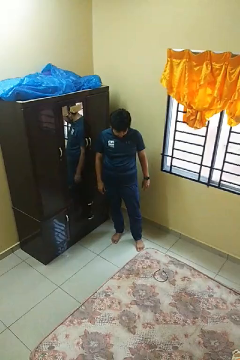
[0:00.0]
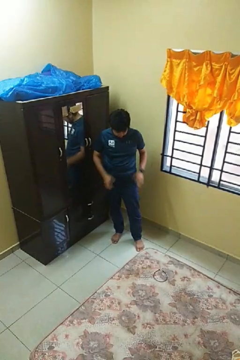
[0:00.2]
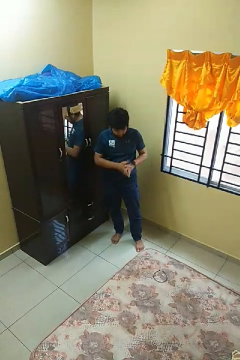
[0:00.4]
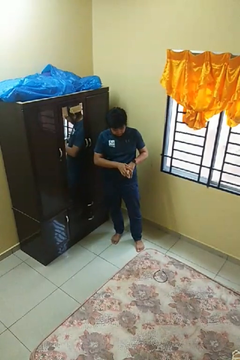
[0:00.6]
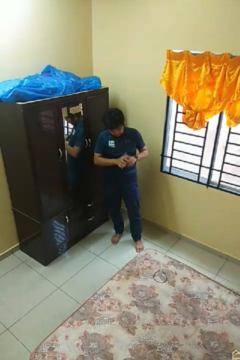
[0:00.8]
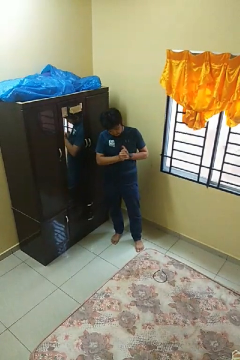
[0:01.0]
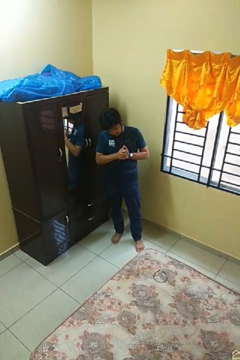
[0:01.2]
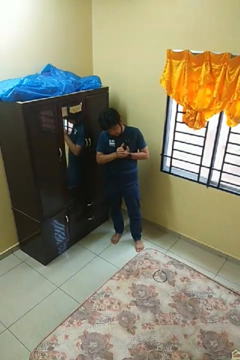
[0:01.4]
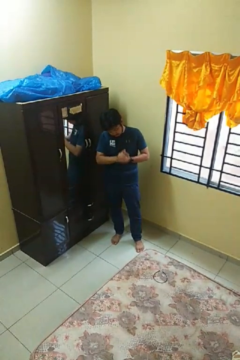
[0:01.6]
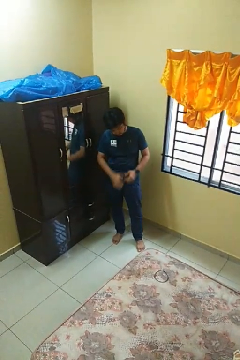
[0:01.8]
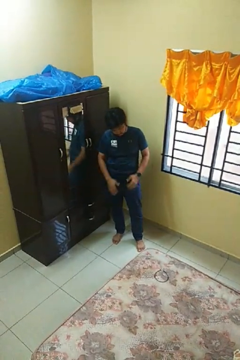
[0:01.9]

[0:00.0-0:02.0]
person cracks knuckles

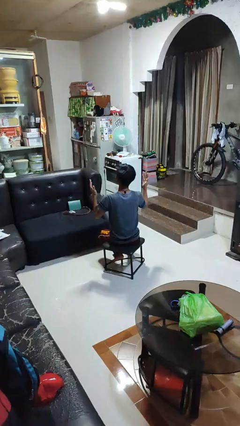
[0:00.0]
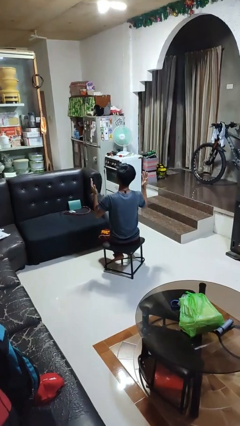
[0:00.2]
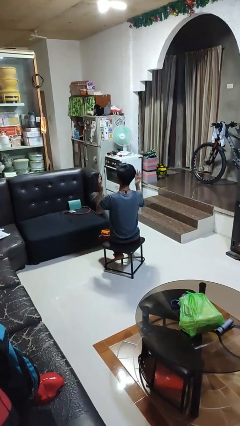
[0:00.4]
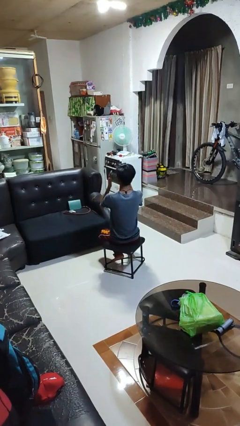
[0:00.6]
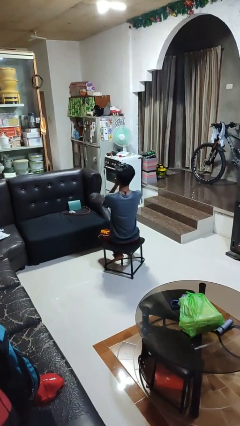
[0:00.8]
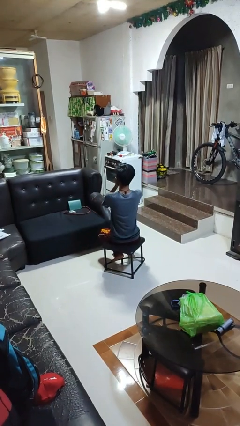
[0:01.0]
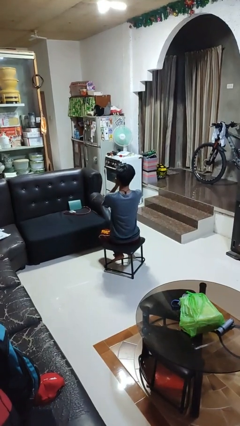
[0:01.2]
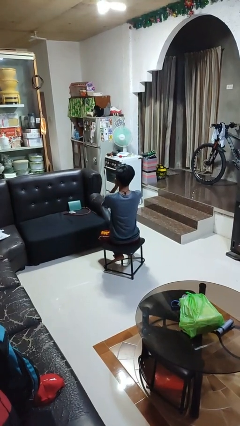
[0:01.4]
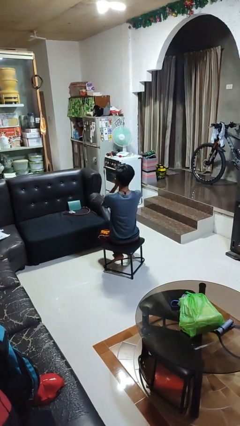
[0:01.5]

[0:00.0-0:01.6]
person covers face with hands

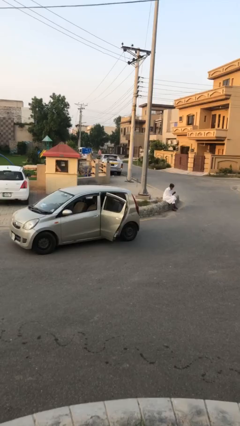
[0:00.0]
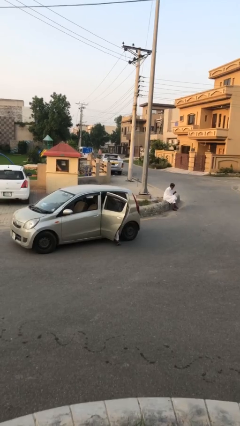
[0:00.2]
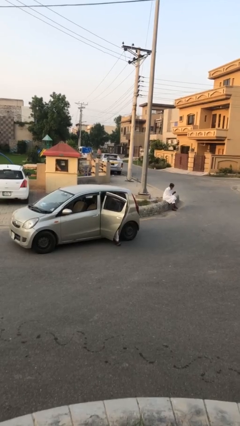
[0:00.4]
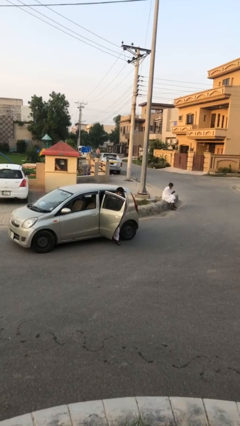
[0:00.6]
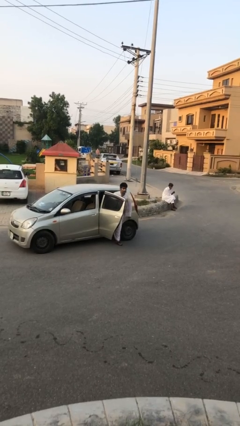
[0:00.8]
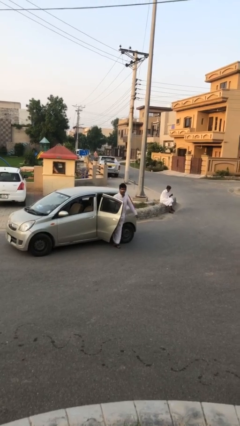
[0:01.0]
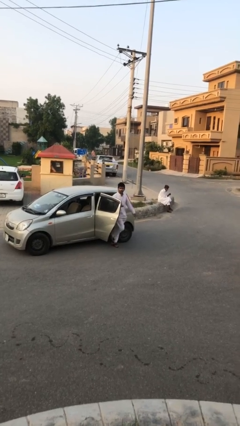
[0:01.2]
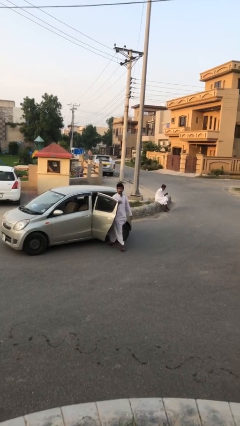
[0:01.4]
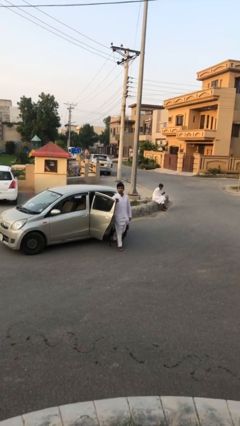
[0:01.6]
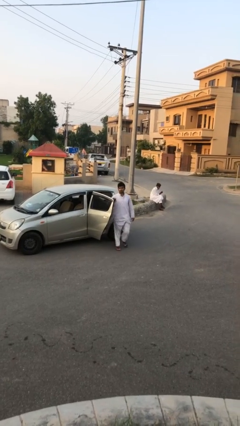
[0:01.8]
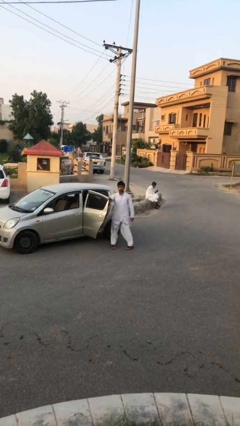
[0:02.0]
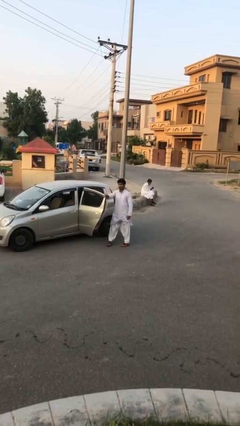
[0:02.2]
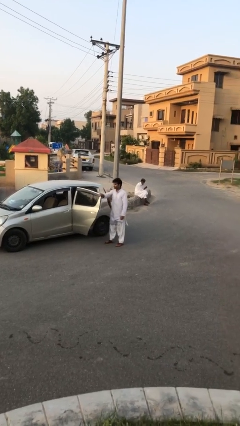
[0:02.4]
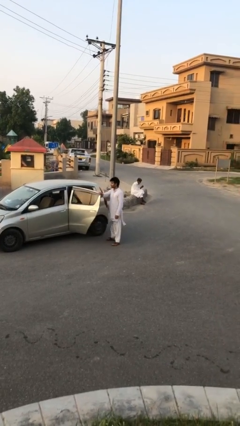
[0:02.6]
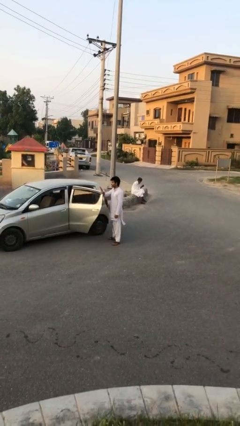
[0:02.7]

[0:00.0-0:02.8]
person exits car

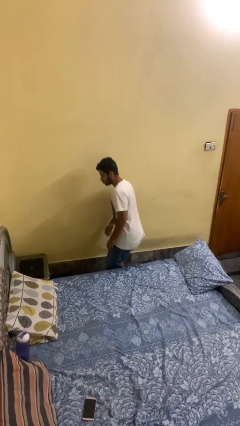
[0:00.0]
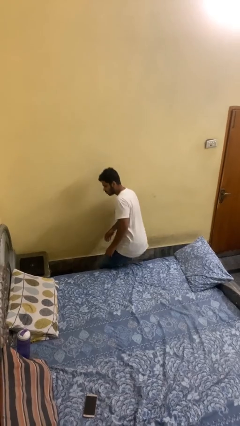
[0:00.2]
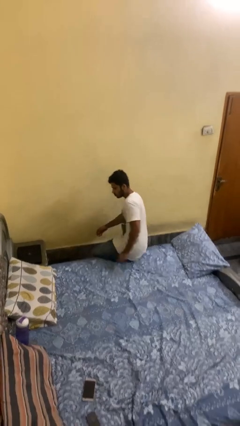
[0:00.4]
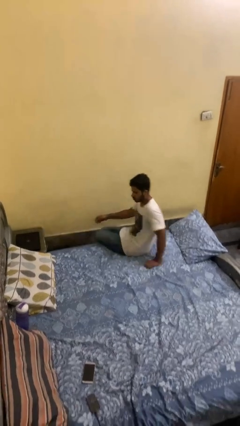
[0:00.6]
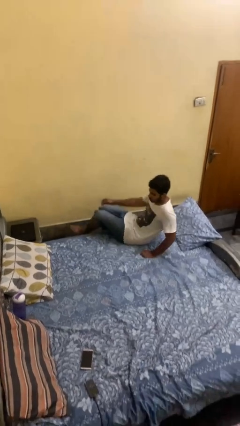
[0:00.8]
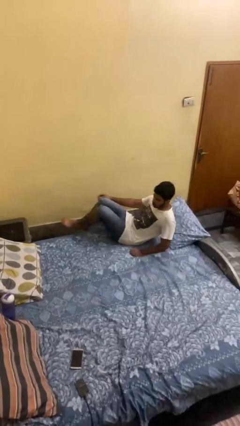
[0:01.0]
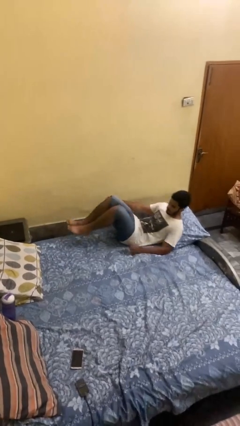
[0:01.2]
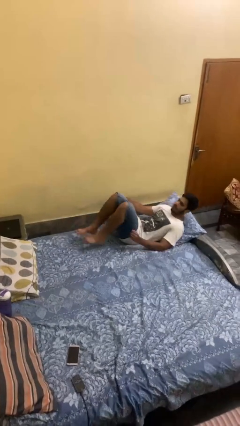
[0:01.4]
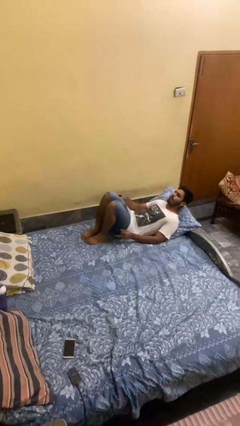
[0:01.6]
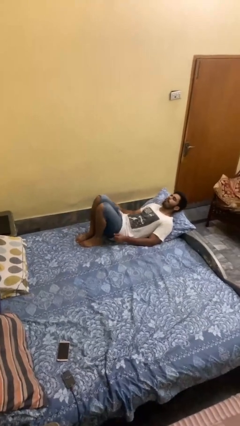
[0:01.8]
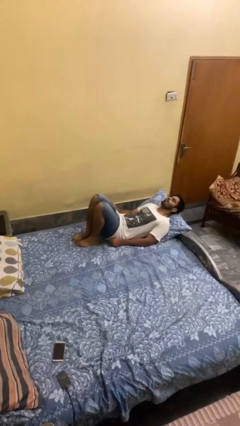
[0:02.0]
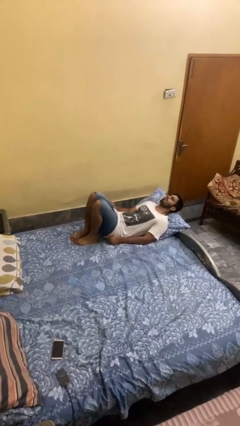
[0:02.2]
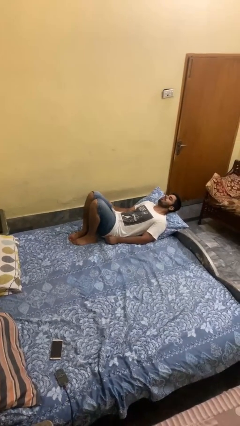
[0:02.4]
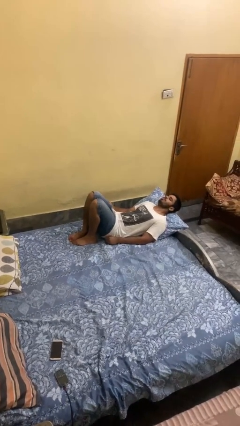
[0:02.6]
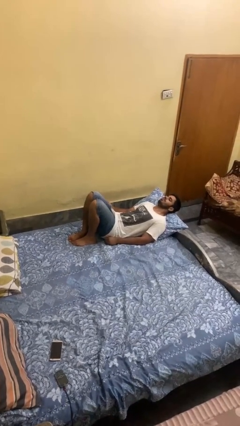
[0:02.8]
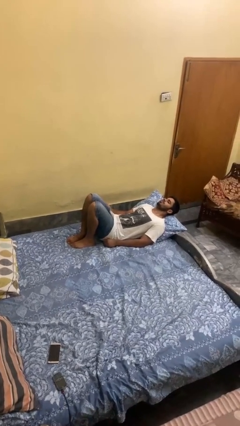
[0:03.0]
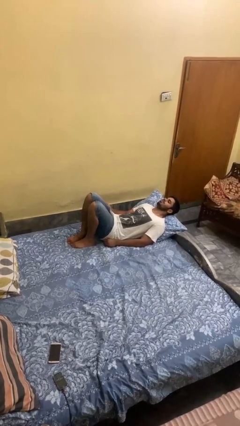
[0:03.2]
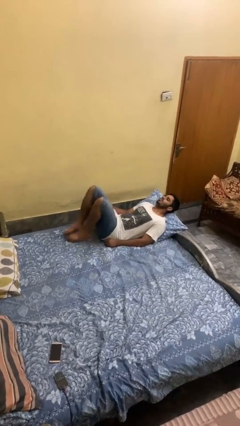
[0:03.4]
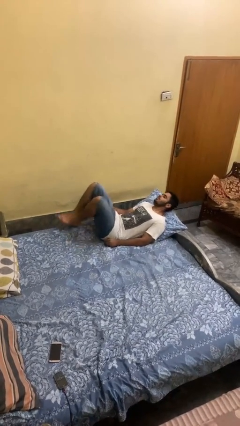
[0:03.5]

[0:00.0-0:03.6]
person lies down on bed

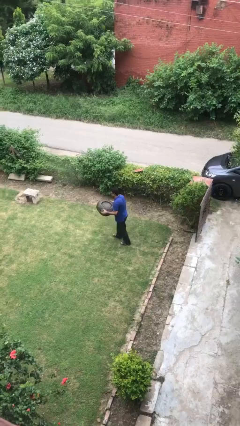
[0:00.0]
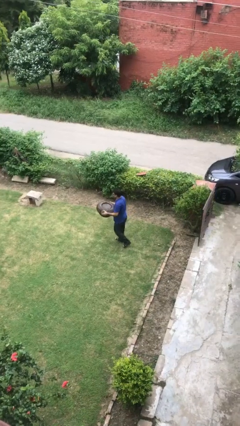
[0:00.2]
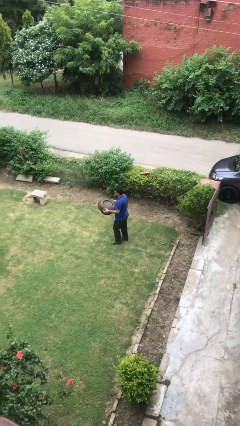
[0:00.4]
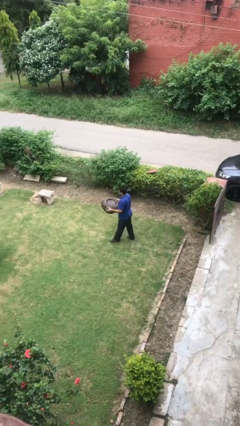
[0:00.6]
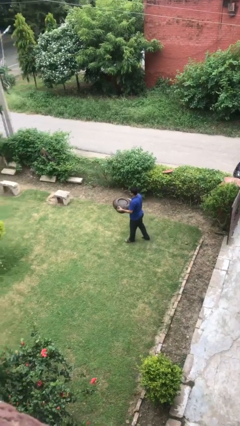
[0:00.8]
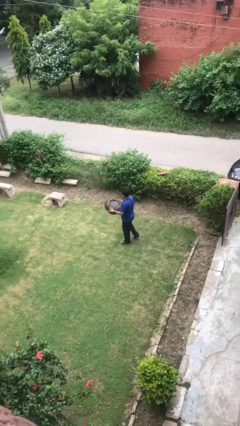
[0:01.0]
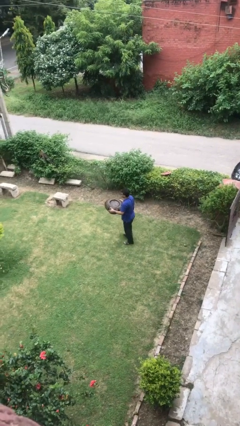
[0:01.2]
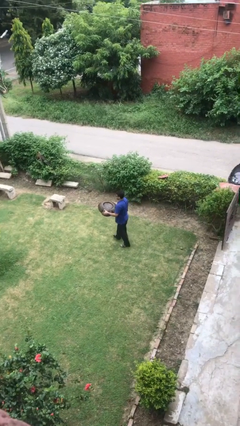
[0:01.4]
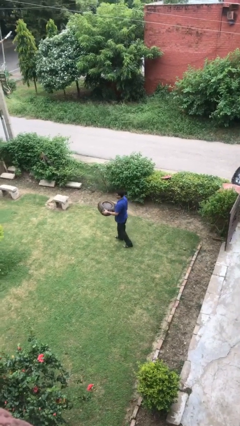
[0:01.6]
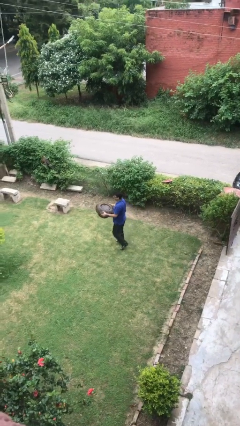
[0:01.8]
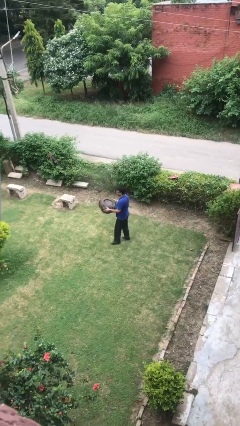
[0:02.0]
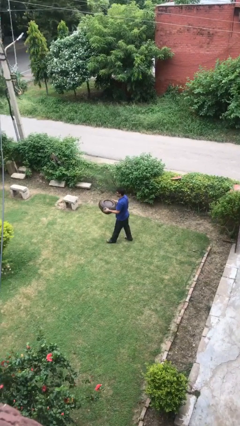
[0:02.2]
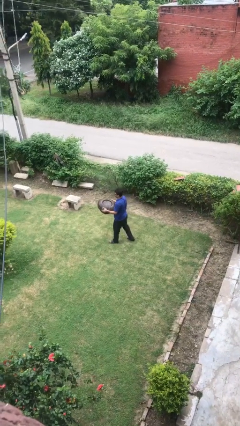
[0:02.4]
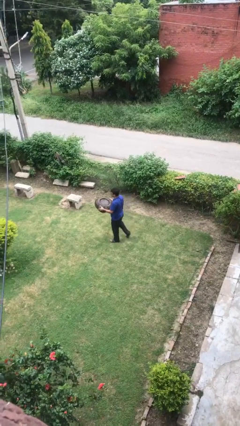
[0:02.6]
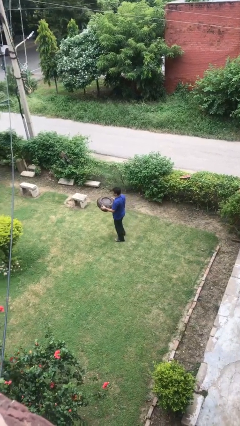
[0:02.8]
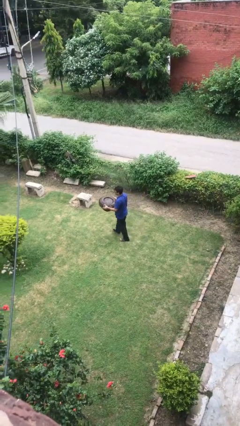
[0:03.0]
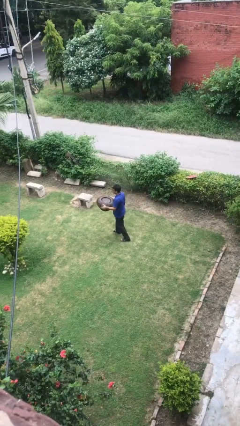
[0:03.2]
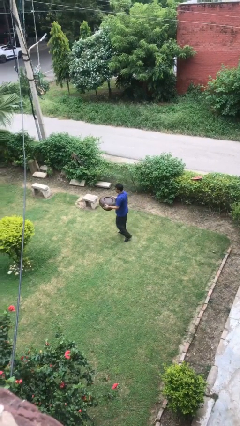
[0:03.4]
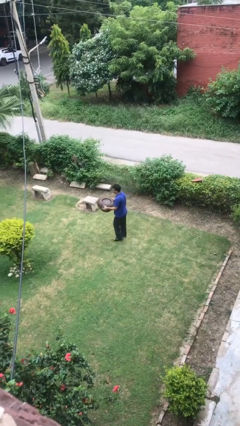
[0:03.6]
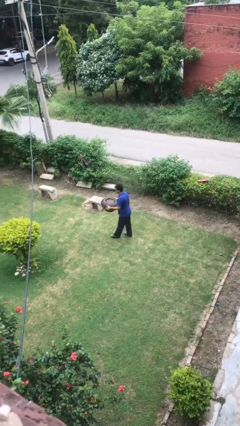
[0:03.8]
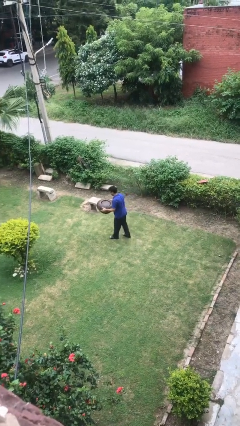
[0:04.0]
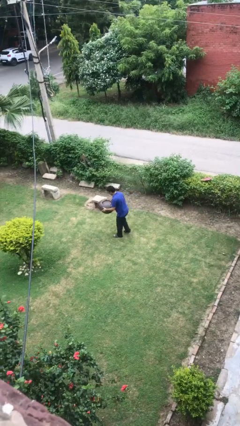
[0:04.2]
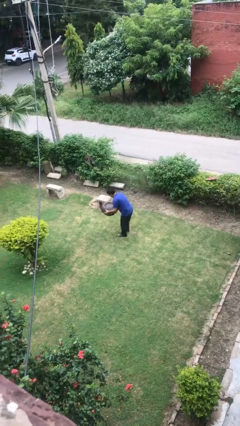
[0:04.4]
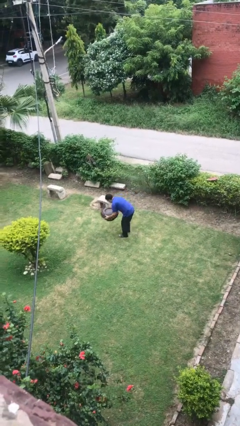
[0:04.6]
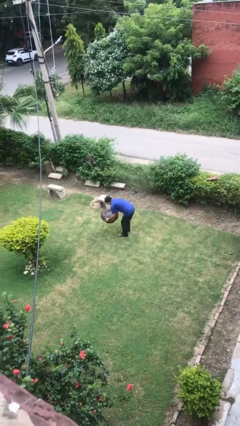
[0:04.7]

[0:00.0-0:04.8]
person carries heavy object

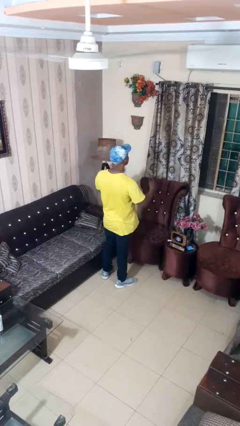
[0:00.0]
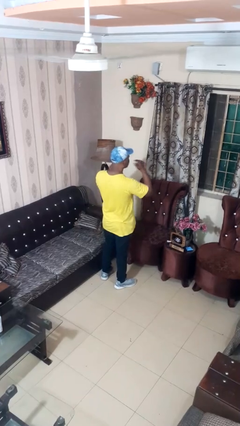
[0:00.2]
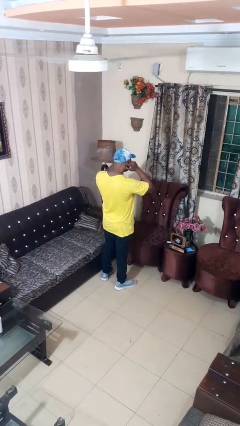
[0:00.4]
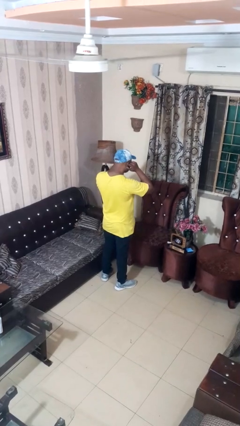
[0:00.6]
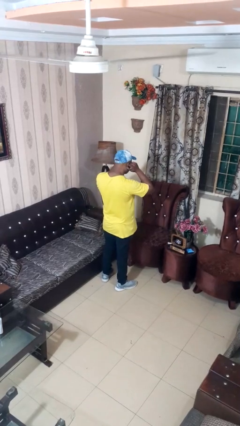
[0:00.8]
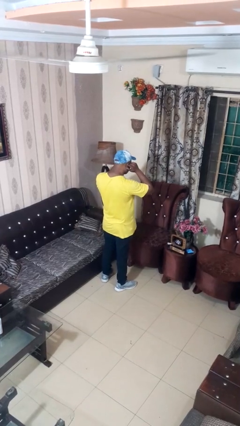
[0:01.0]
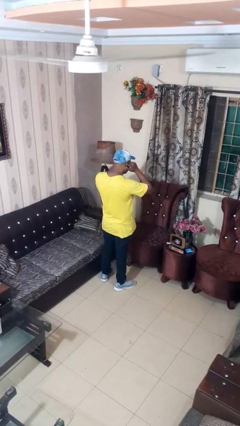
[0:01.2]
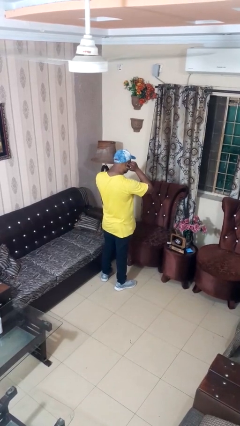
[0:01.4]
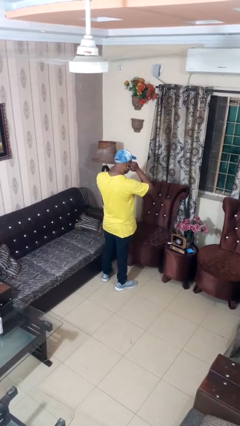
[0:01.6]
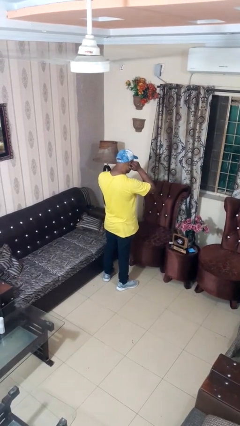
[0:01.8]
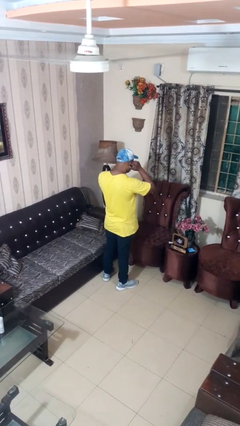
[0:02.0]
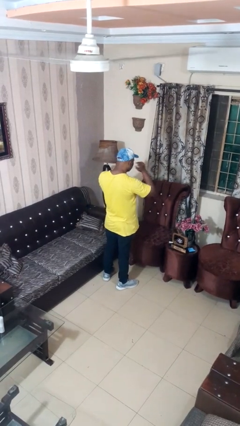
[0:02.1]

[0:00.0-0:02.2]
person puts fingers in ear

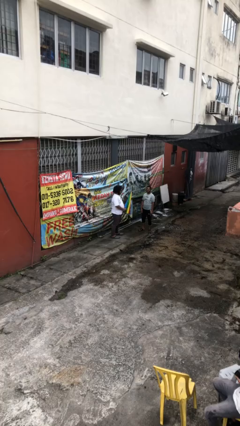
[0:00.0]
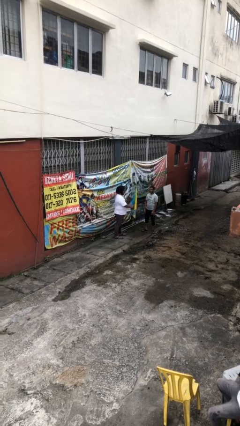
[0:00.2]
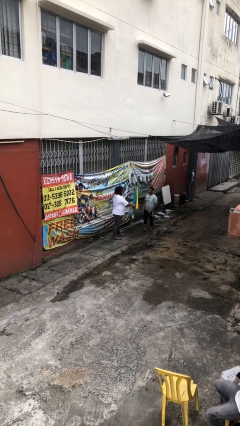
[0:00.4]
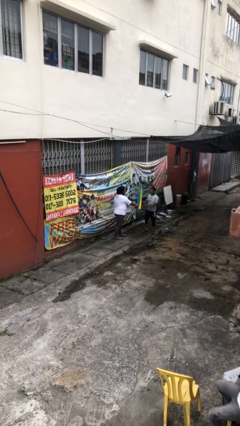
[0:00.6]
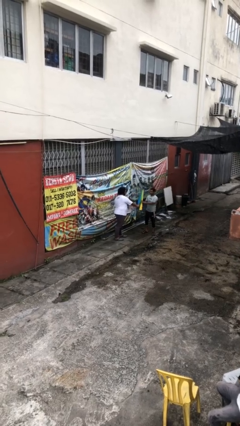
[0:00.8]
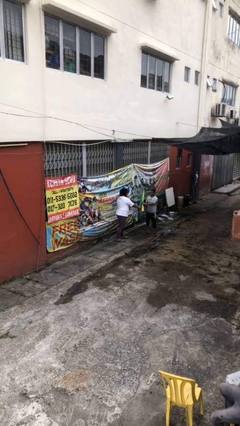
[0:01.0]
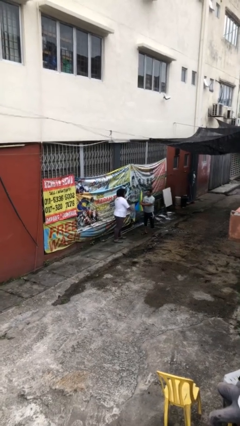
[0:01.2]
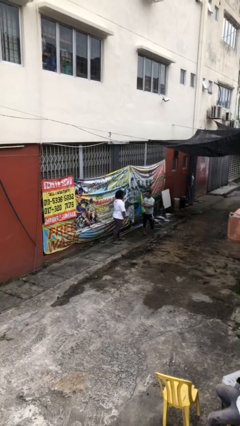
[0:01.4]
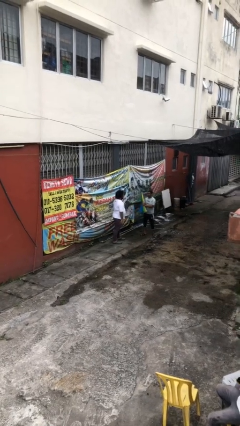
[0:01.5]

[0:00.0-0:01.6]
person transfers object to person
